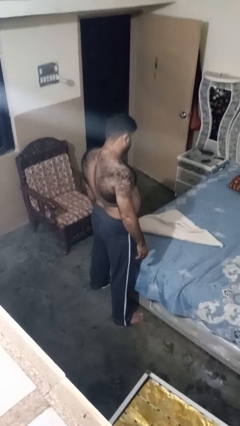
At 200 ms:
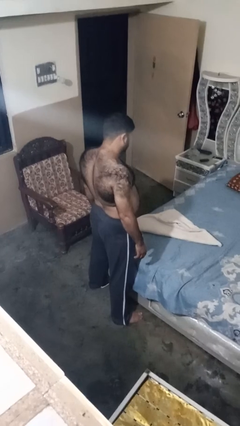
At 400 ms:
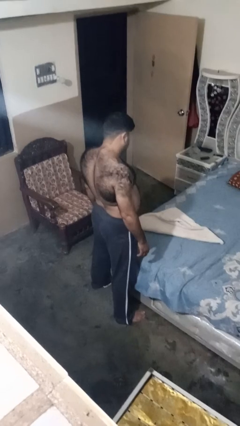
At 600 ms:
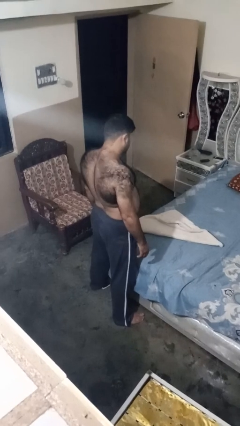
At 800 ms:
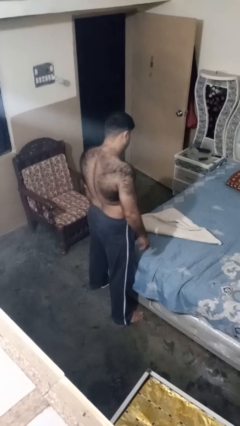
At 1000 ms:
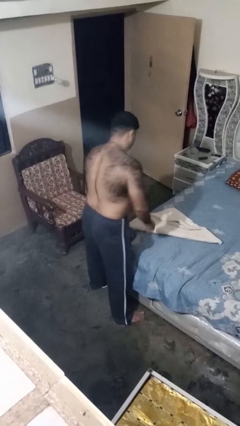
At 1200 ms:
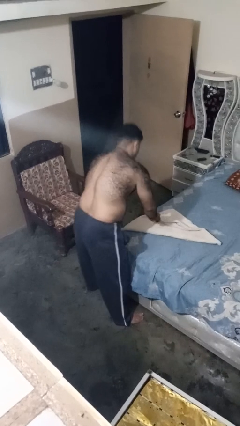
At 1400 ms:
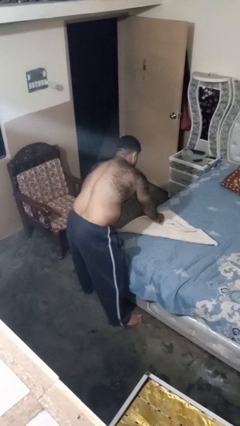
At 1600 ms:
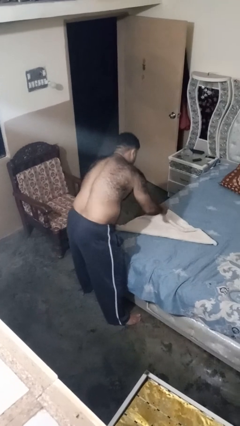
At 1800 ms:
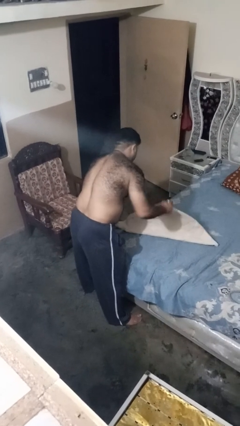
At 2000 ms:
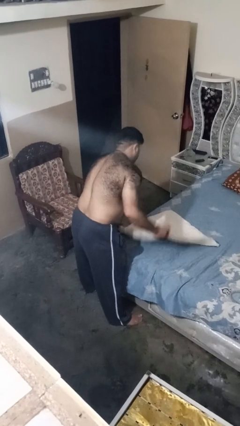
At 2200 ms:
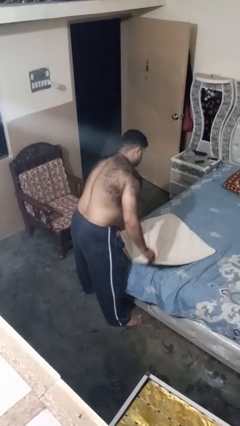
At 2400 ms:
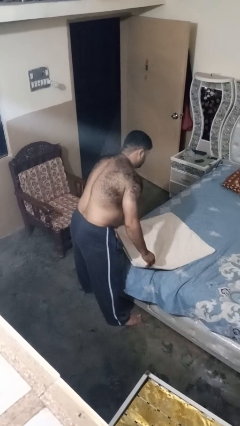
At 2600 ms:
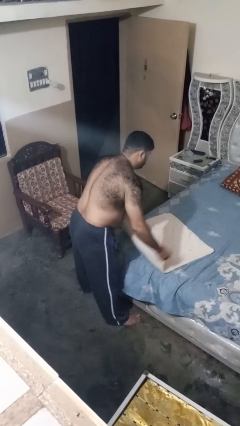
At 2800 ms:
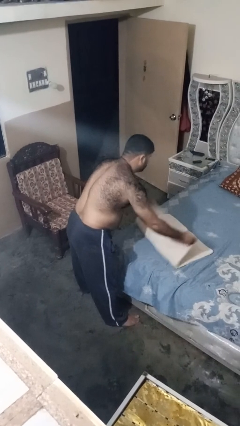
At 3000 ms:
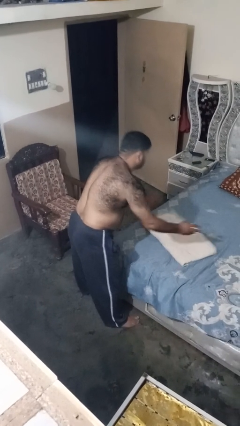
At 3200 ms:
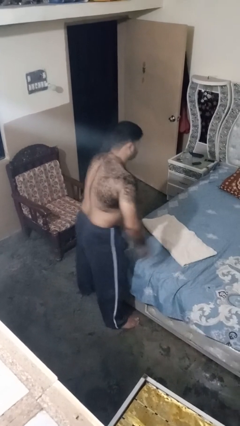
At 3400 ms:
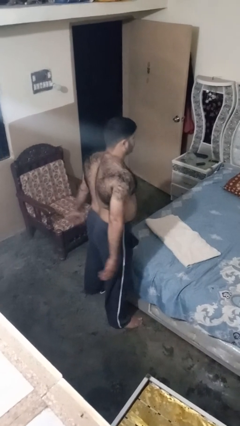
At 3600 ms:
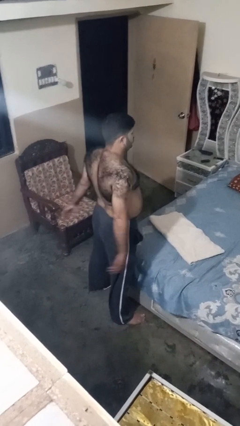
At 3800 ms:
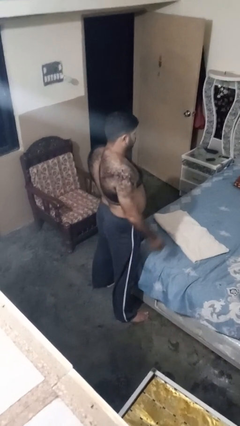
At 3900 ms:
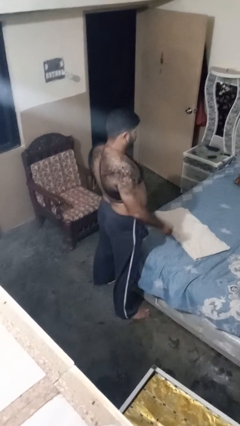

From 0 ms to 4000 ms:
person folds towel

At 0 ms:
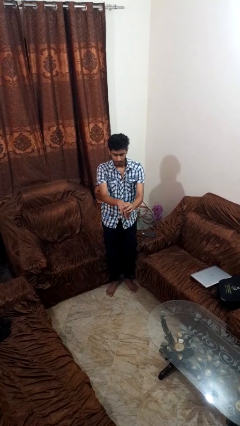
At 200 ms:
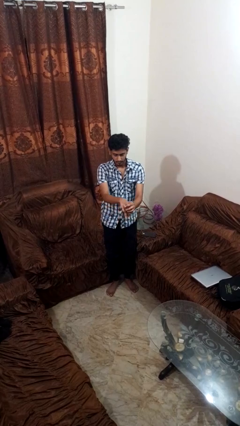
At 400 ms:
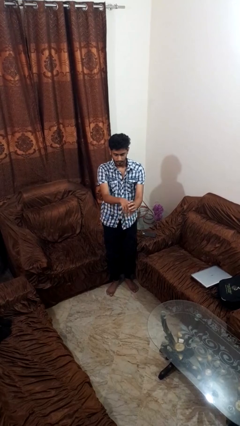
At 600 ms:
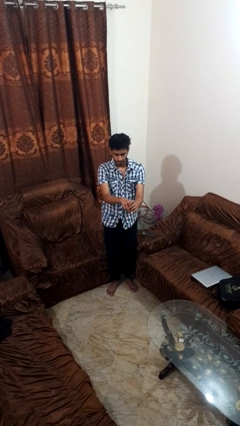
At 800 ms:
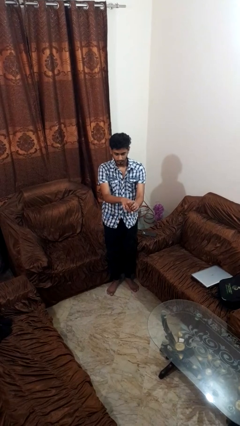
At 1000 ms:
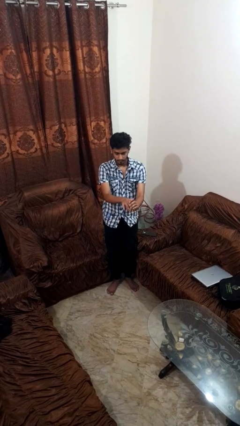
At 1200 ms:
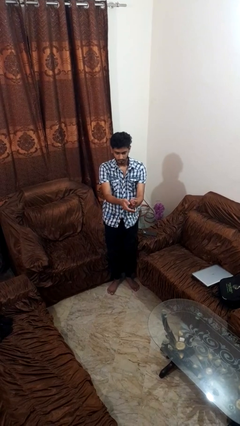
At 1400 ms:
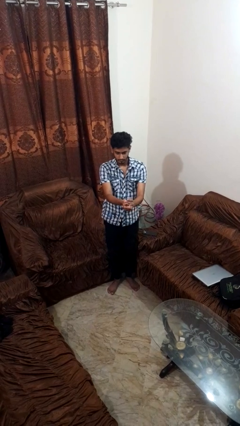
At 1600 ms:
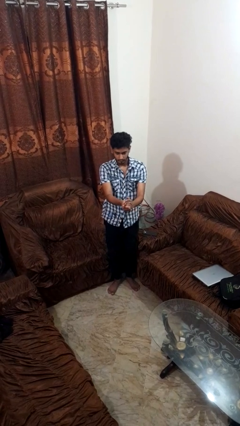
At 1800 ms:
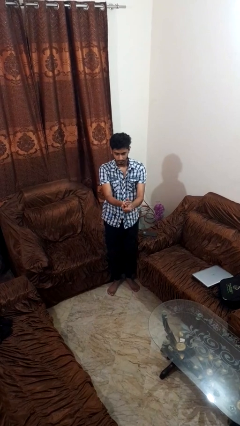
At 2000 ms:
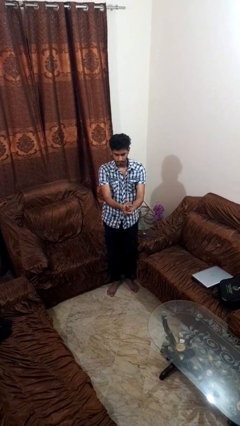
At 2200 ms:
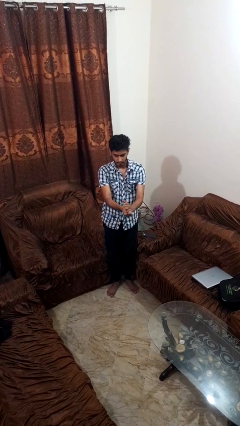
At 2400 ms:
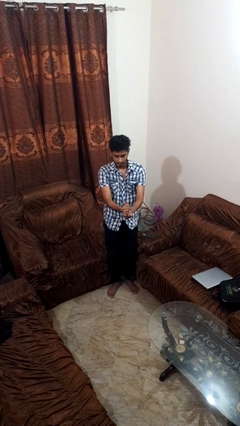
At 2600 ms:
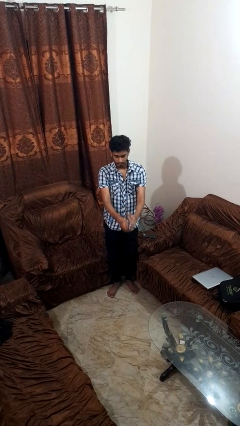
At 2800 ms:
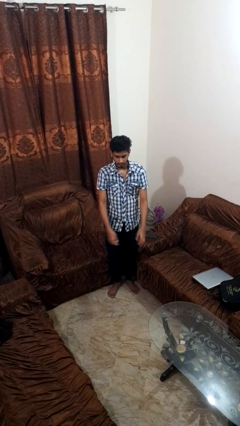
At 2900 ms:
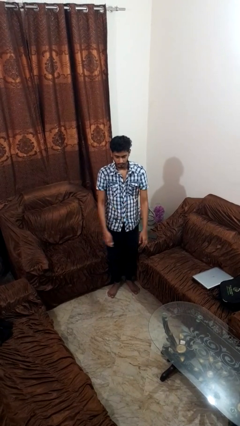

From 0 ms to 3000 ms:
person cracks knuckles

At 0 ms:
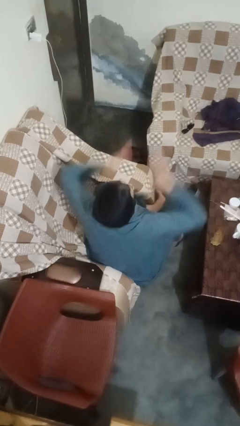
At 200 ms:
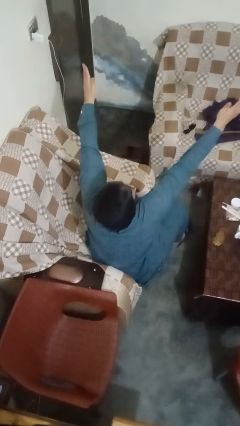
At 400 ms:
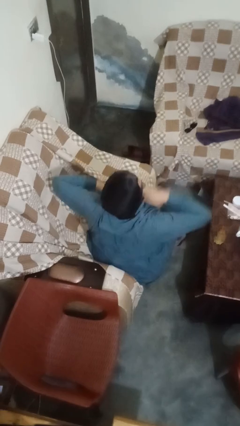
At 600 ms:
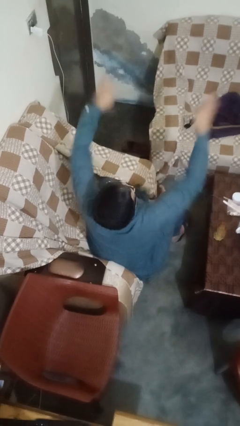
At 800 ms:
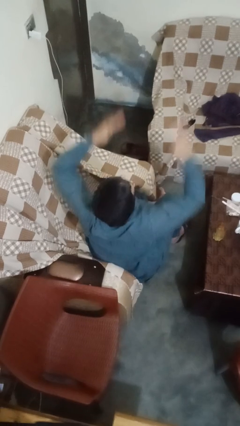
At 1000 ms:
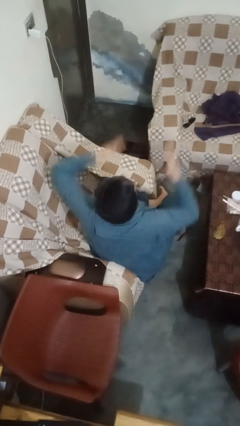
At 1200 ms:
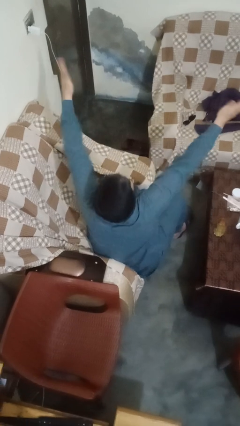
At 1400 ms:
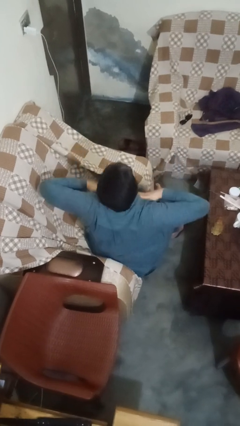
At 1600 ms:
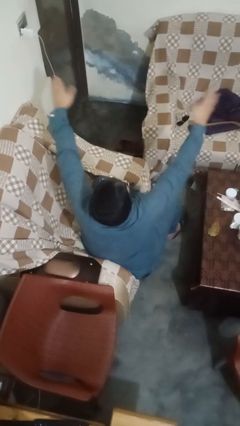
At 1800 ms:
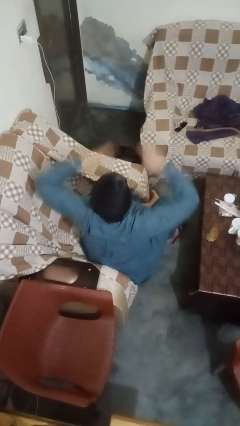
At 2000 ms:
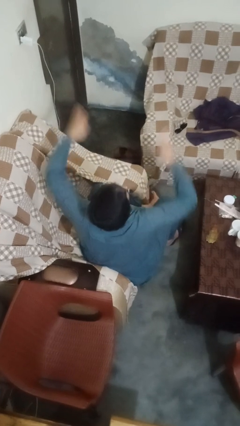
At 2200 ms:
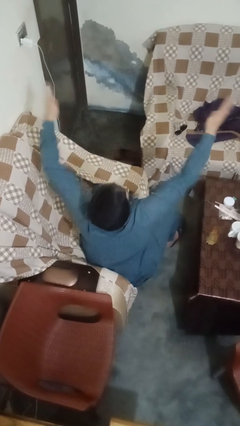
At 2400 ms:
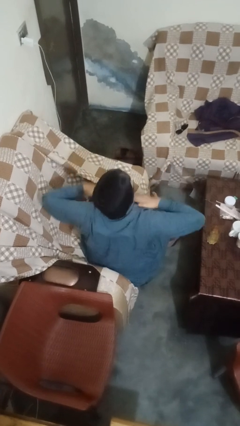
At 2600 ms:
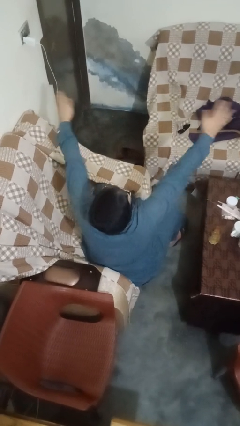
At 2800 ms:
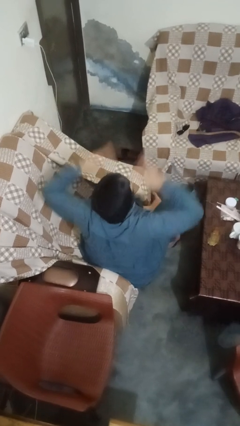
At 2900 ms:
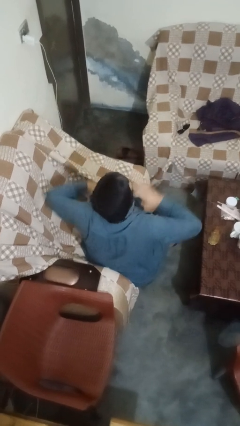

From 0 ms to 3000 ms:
person drums on chest

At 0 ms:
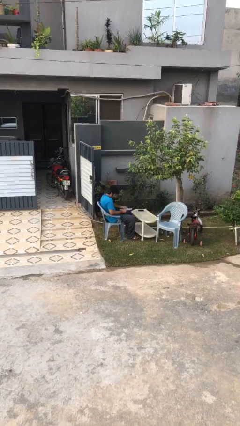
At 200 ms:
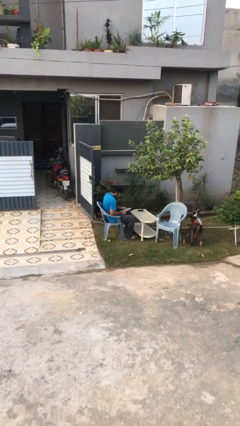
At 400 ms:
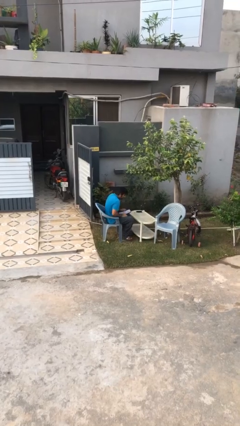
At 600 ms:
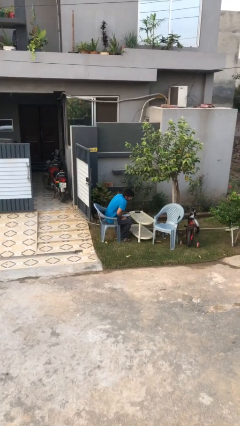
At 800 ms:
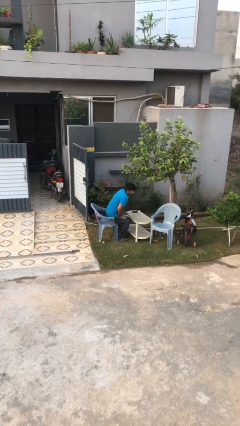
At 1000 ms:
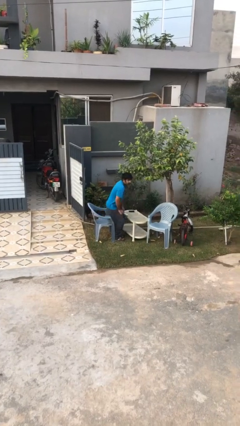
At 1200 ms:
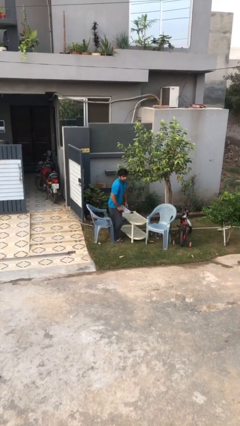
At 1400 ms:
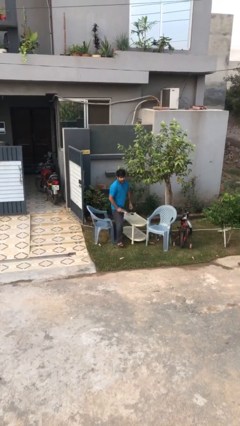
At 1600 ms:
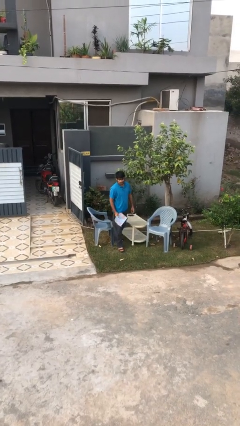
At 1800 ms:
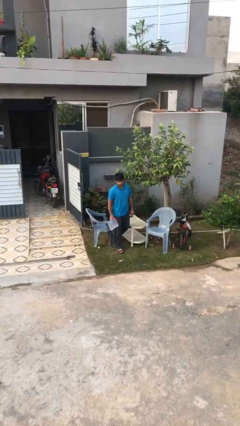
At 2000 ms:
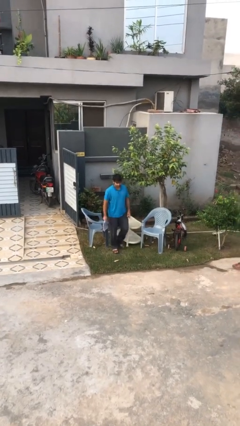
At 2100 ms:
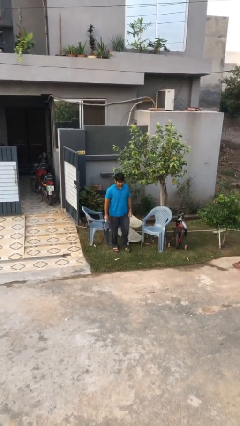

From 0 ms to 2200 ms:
person stands up

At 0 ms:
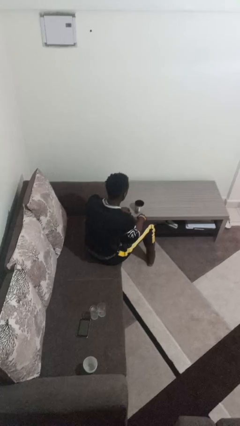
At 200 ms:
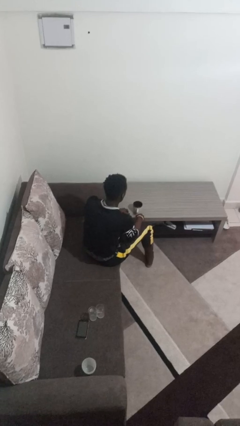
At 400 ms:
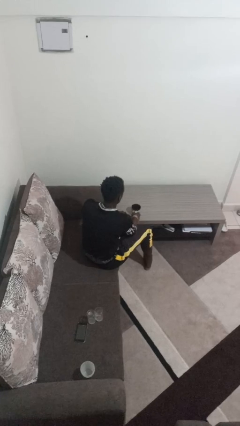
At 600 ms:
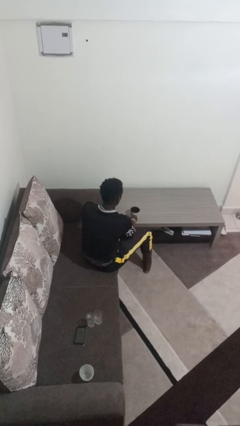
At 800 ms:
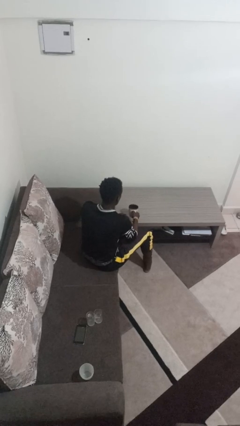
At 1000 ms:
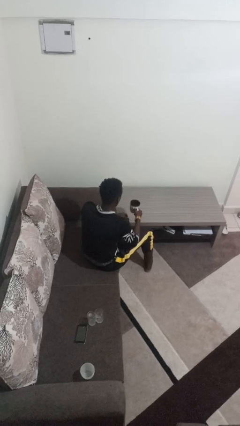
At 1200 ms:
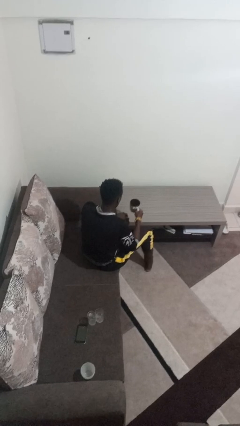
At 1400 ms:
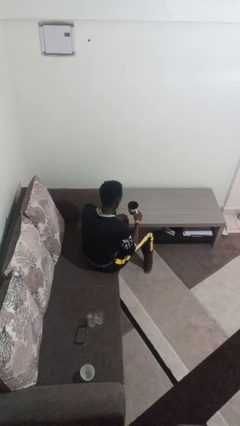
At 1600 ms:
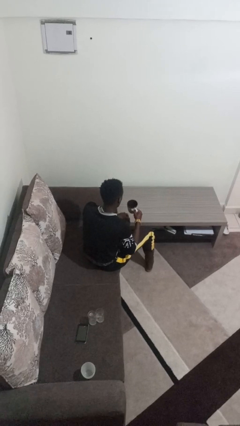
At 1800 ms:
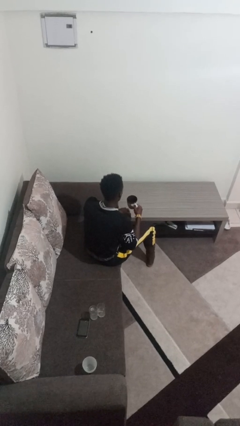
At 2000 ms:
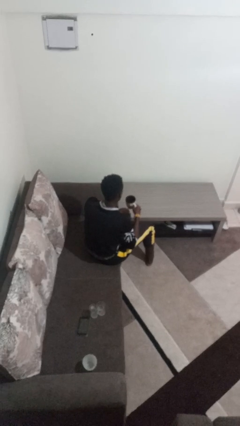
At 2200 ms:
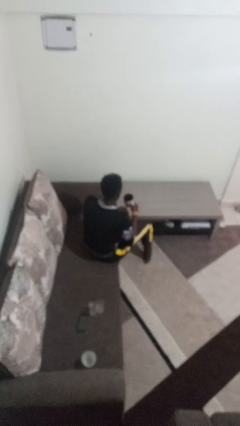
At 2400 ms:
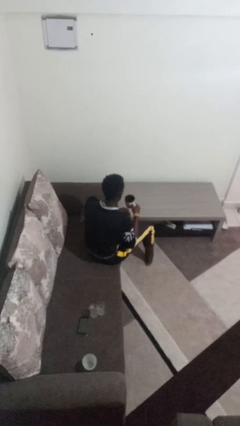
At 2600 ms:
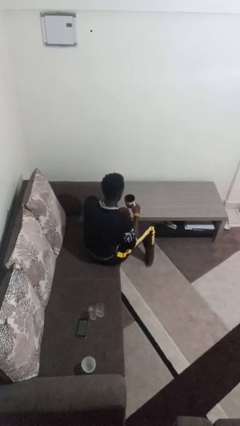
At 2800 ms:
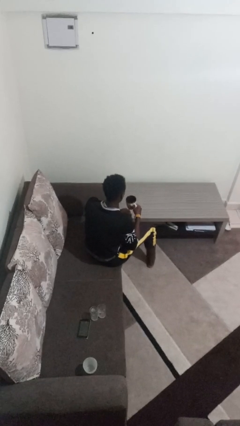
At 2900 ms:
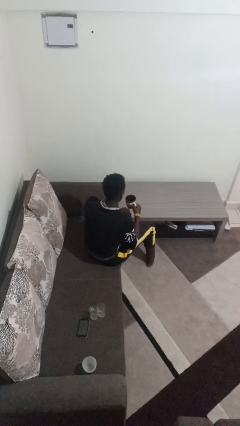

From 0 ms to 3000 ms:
person picks up object from table

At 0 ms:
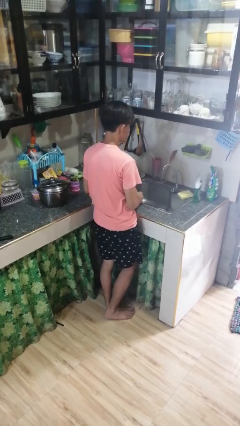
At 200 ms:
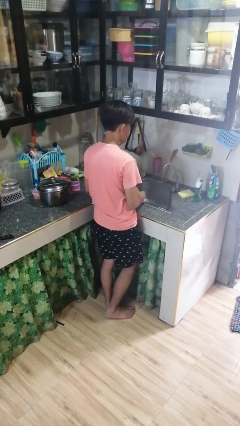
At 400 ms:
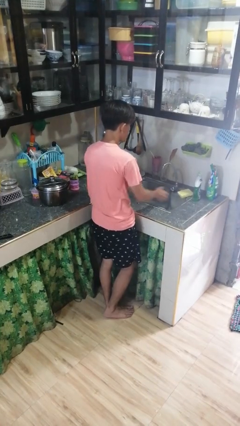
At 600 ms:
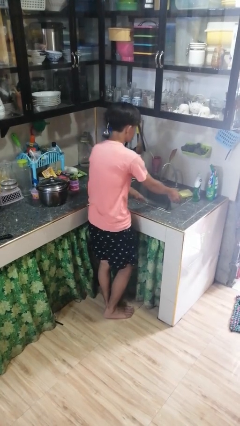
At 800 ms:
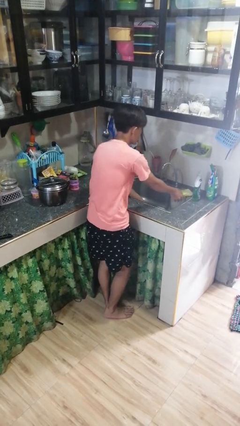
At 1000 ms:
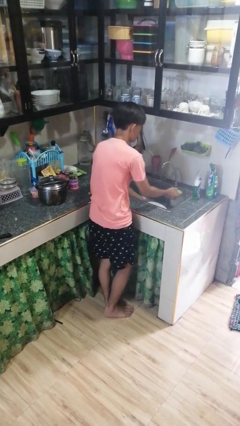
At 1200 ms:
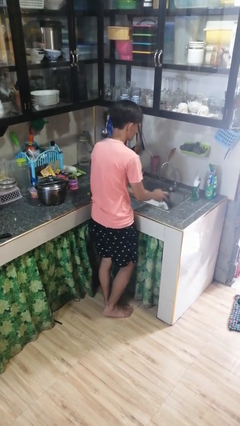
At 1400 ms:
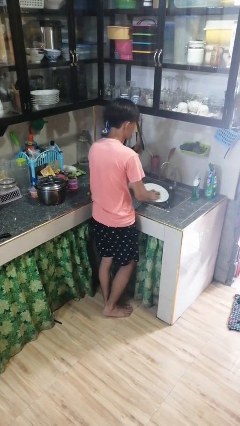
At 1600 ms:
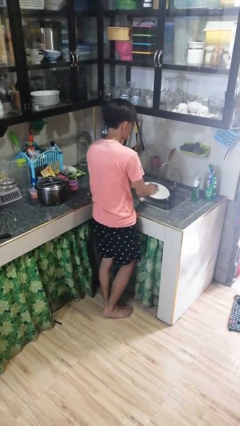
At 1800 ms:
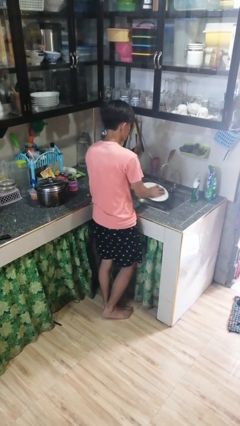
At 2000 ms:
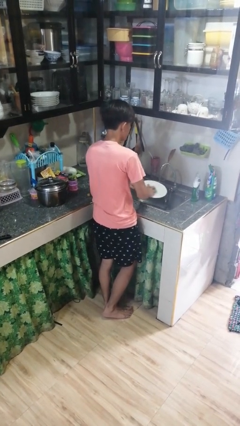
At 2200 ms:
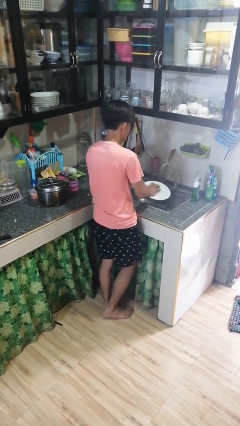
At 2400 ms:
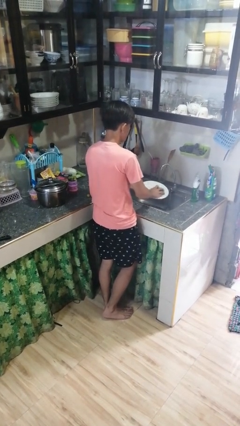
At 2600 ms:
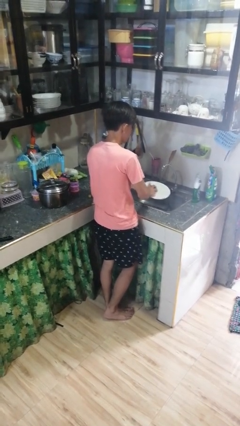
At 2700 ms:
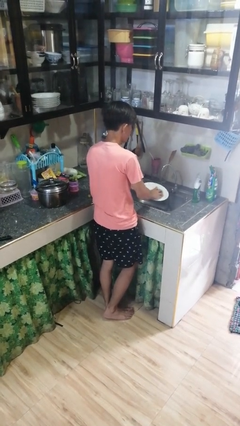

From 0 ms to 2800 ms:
person washes dish
